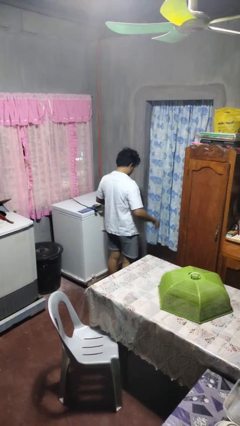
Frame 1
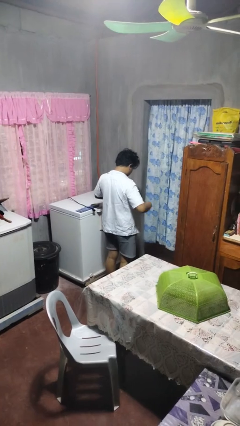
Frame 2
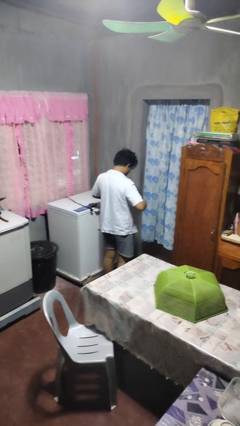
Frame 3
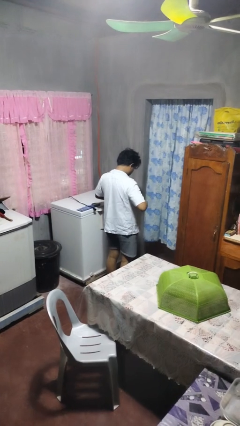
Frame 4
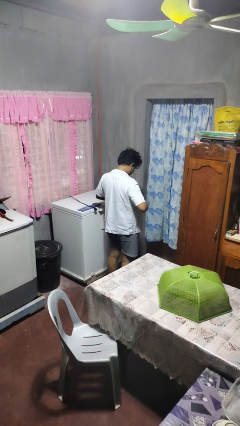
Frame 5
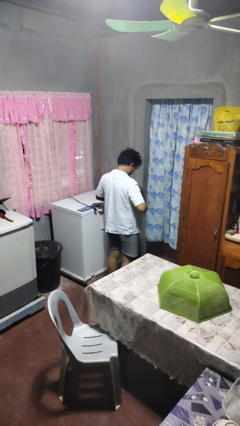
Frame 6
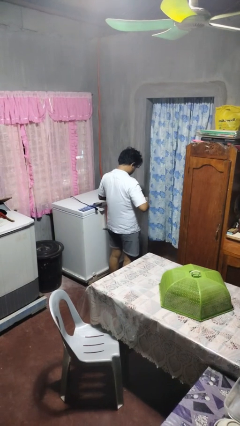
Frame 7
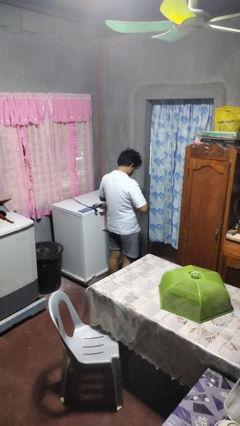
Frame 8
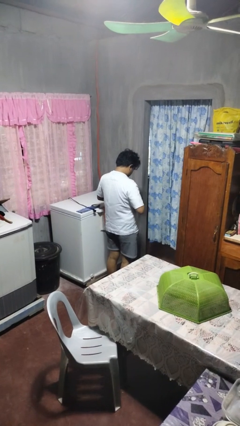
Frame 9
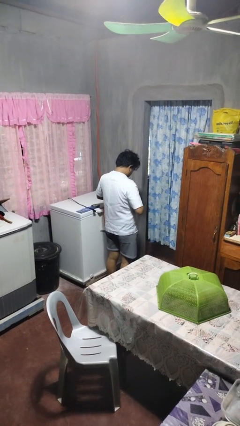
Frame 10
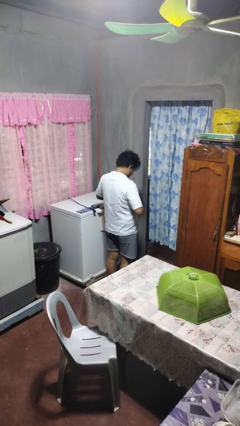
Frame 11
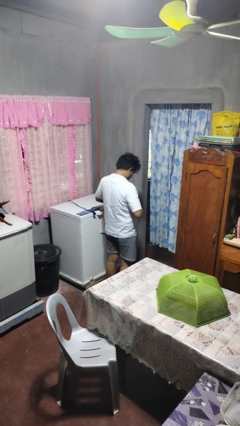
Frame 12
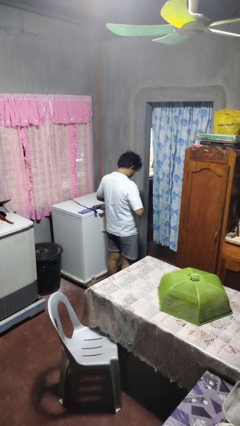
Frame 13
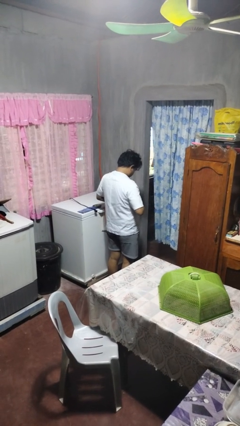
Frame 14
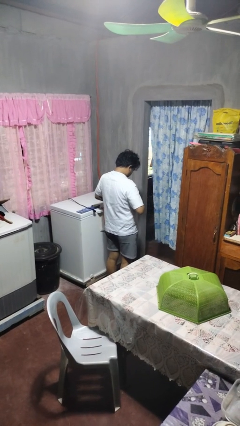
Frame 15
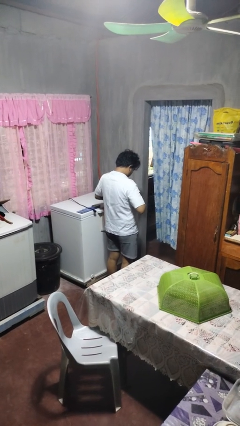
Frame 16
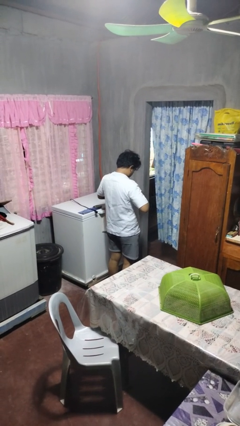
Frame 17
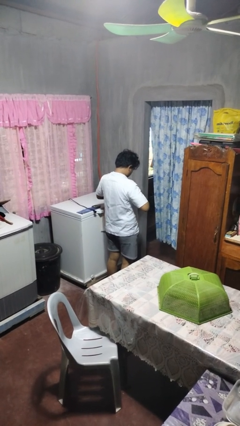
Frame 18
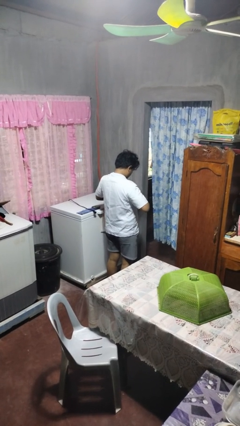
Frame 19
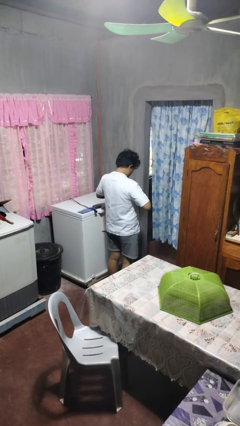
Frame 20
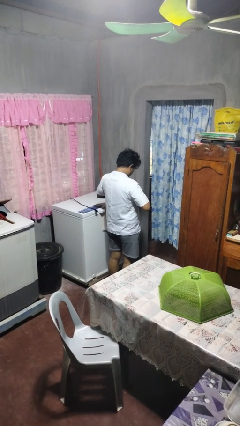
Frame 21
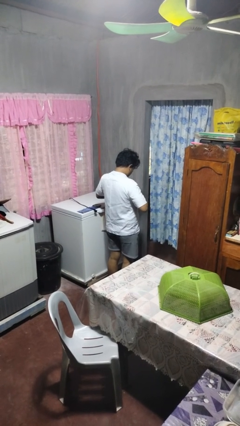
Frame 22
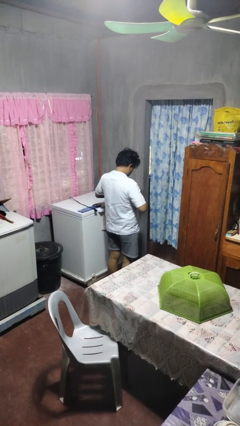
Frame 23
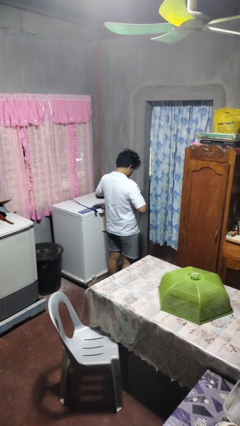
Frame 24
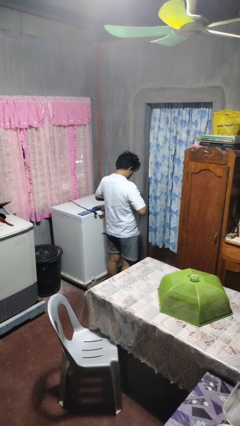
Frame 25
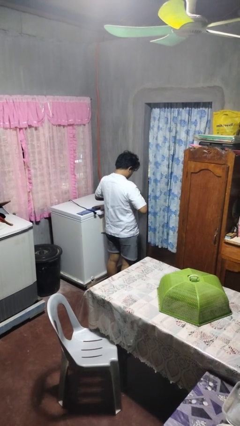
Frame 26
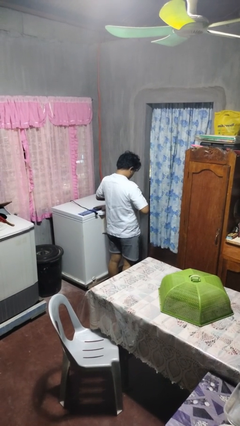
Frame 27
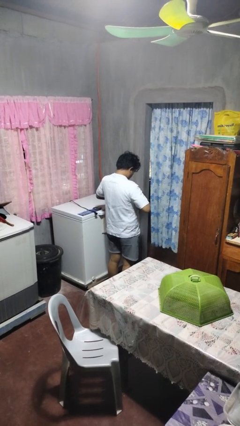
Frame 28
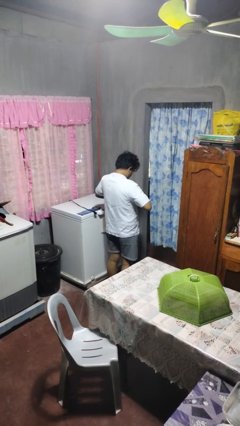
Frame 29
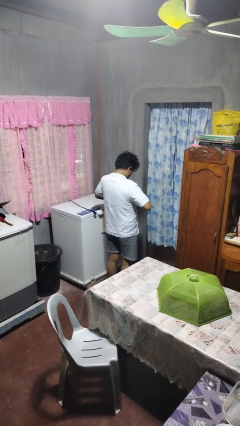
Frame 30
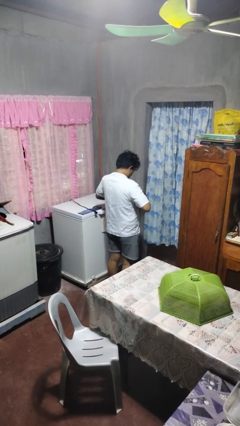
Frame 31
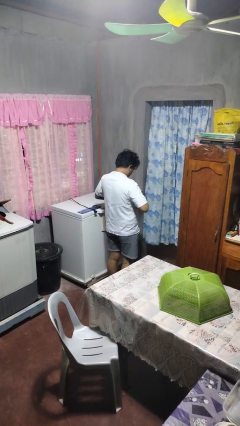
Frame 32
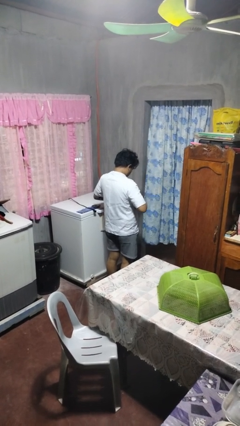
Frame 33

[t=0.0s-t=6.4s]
person buttons shirt

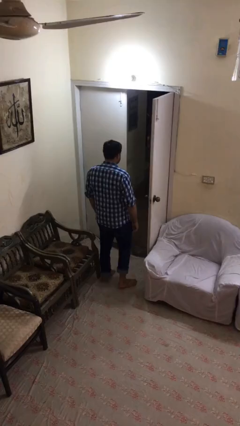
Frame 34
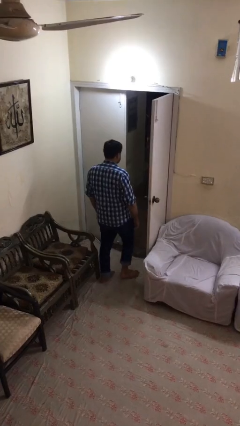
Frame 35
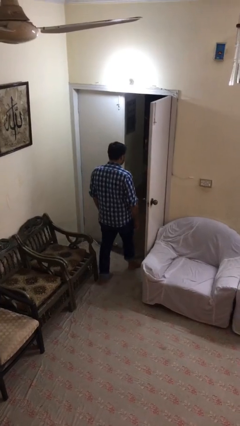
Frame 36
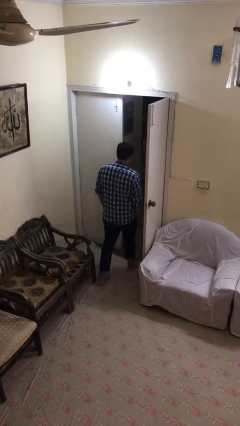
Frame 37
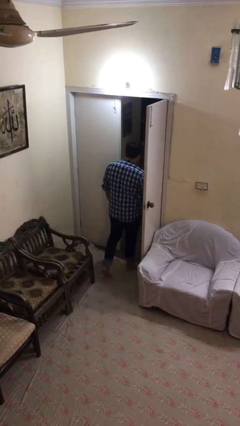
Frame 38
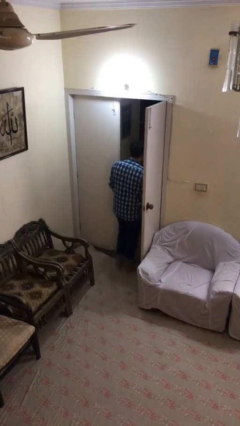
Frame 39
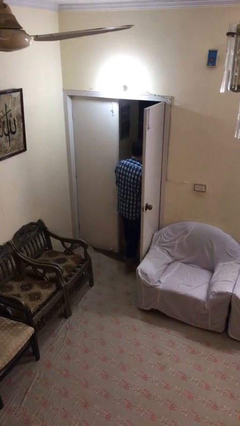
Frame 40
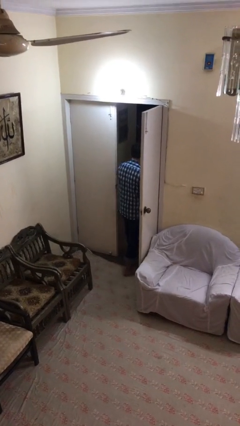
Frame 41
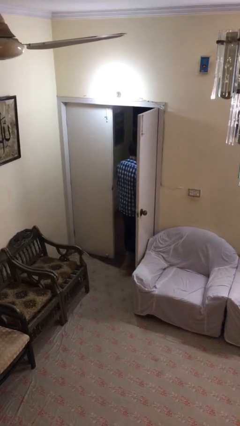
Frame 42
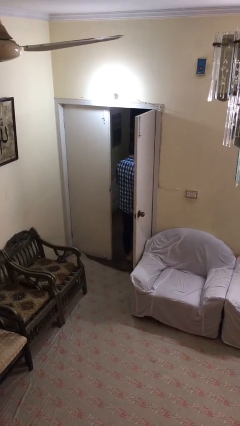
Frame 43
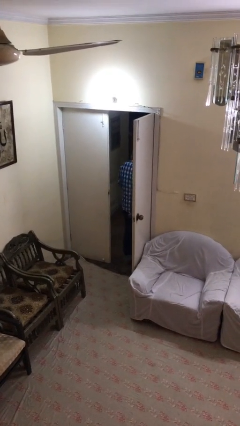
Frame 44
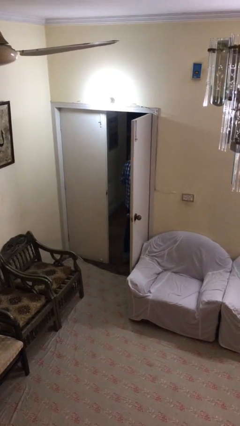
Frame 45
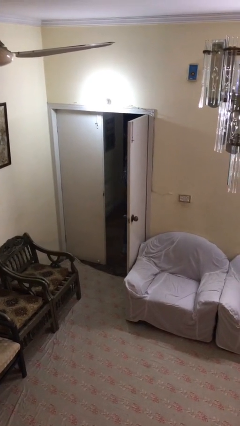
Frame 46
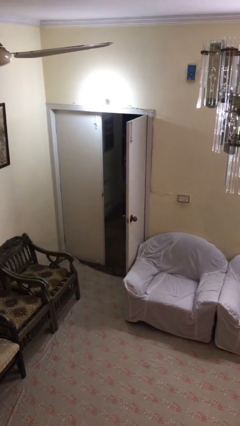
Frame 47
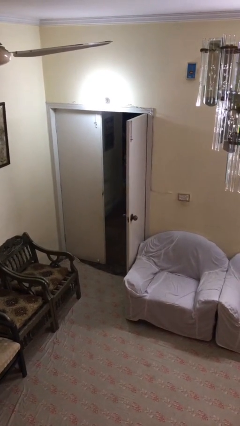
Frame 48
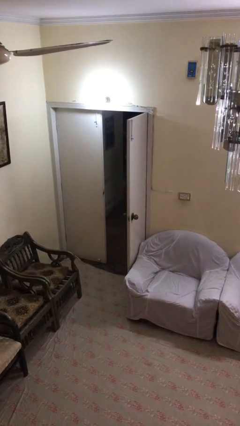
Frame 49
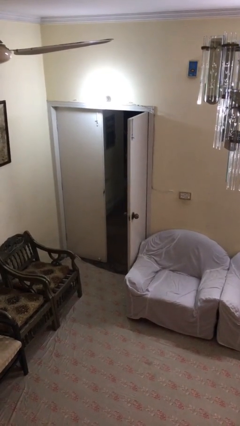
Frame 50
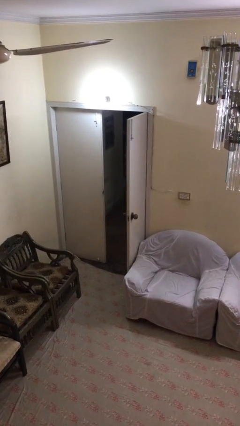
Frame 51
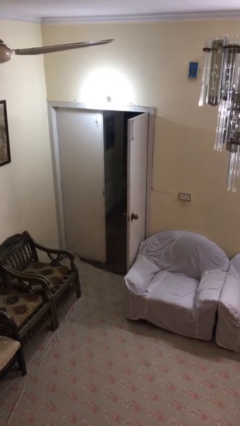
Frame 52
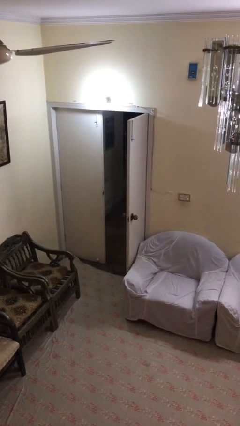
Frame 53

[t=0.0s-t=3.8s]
person exits scene through structure

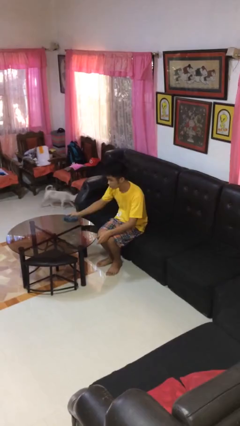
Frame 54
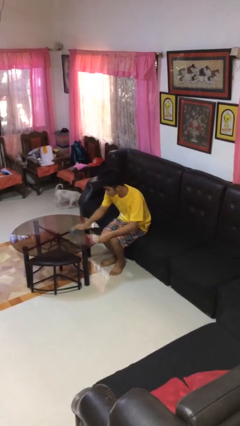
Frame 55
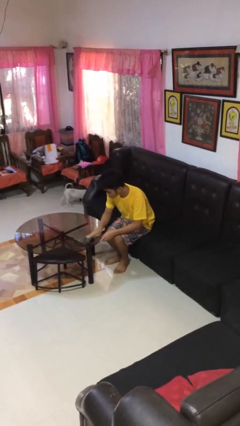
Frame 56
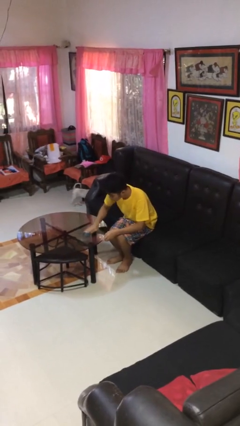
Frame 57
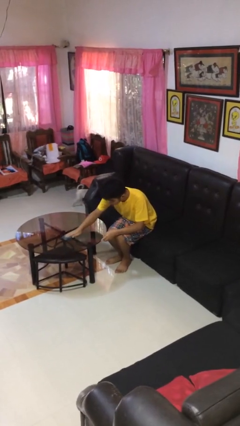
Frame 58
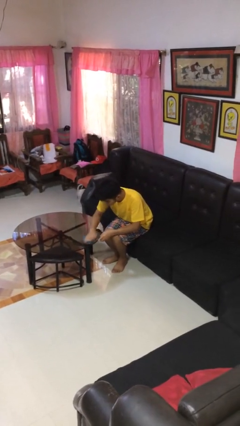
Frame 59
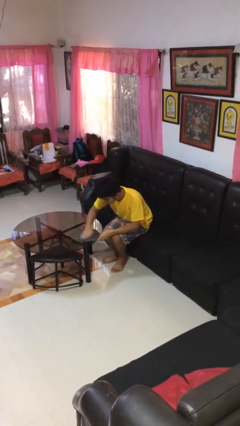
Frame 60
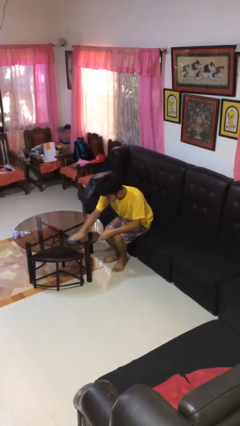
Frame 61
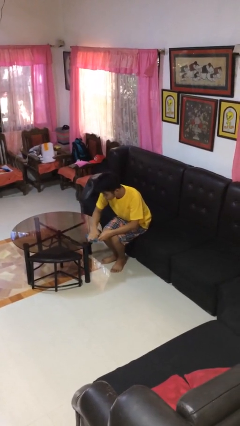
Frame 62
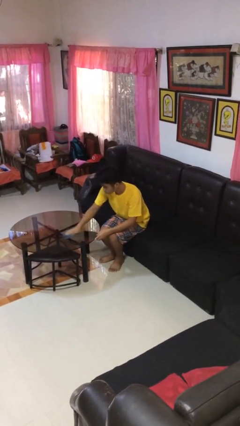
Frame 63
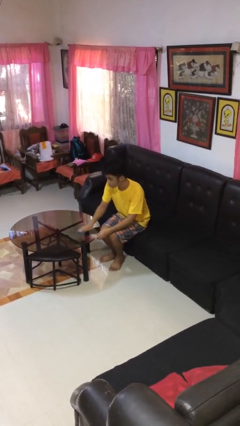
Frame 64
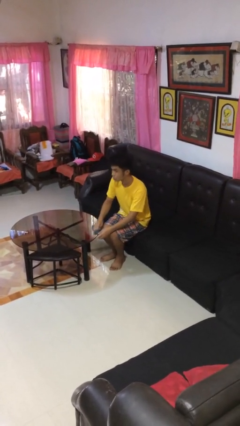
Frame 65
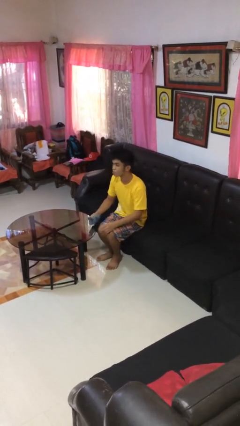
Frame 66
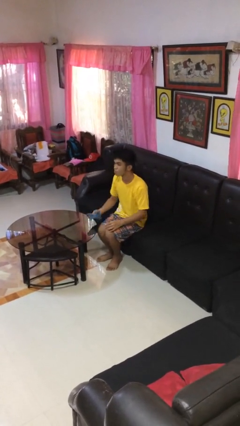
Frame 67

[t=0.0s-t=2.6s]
person cleans table with rag

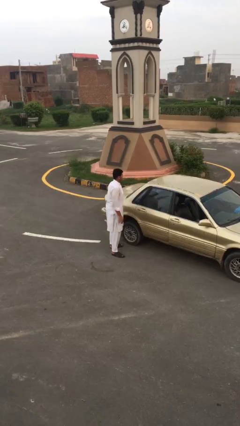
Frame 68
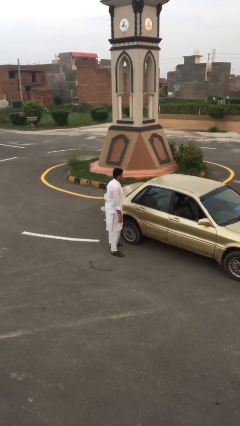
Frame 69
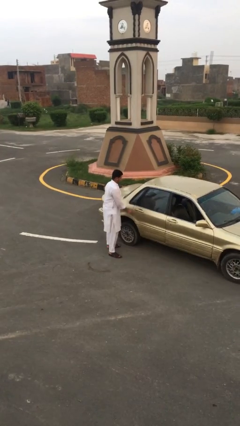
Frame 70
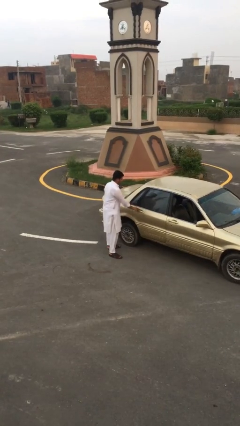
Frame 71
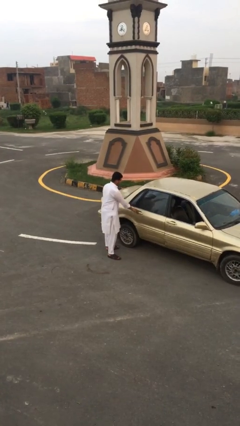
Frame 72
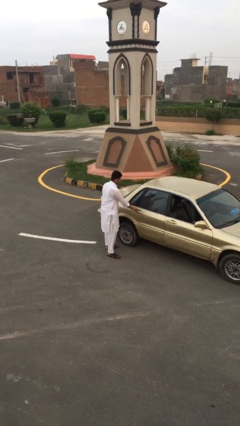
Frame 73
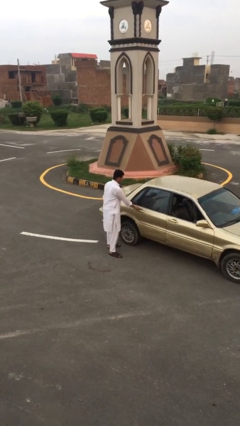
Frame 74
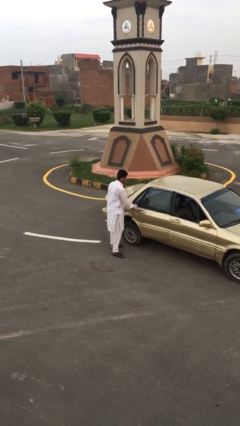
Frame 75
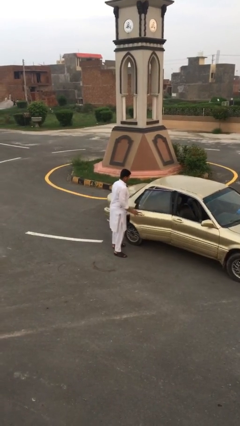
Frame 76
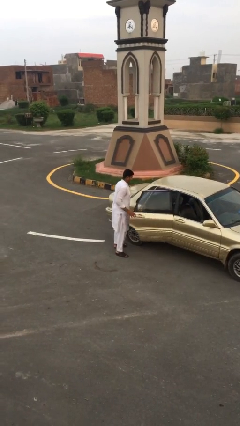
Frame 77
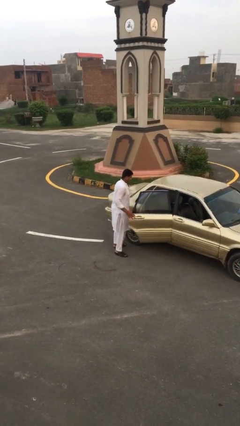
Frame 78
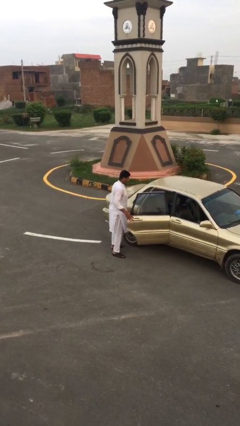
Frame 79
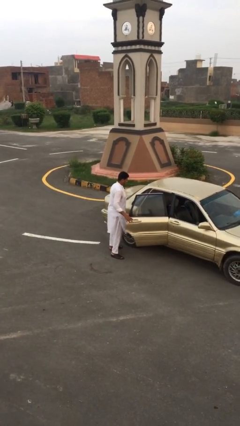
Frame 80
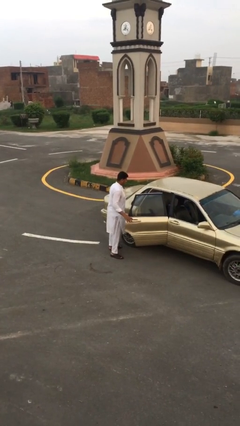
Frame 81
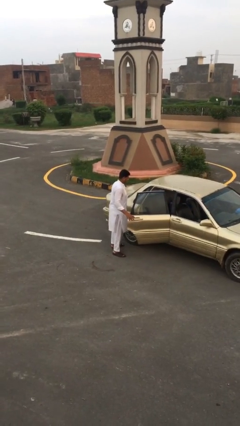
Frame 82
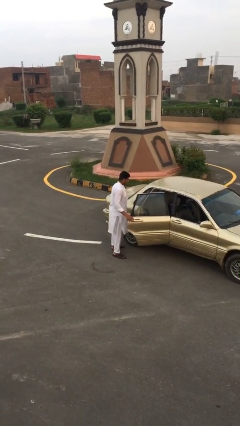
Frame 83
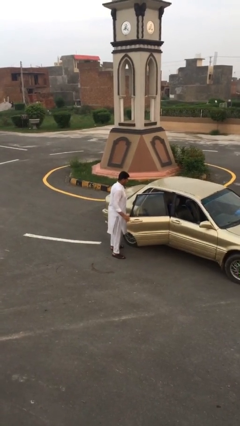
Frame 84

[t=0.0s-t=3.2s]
person opens car door

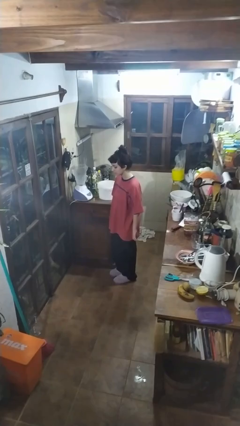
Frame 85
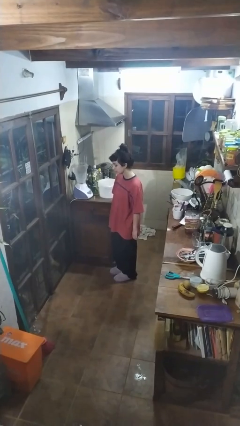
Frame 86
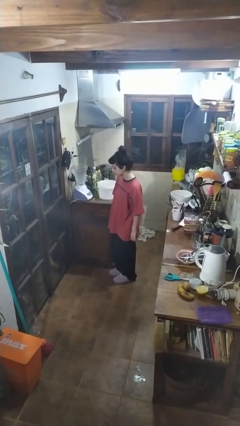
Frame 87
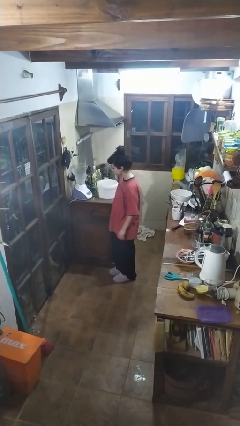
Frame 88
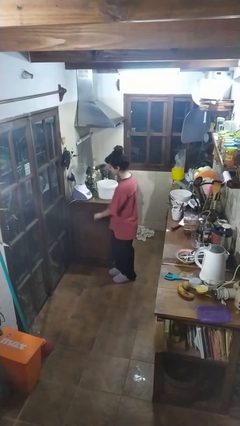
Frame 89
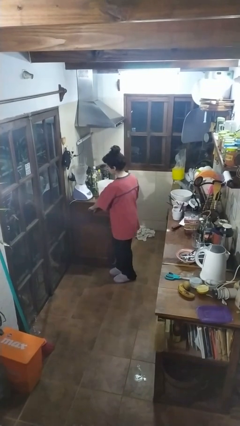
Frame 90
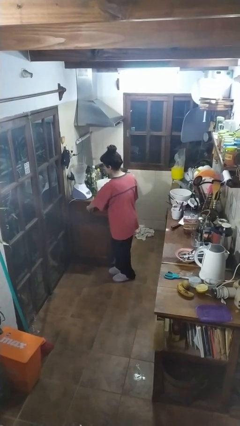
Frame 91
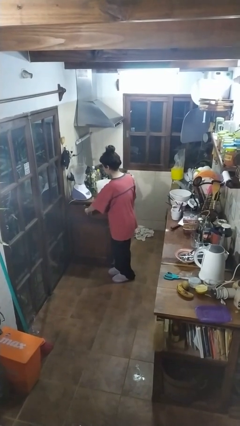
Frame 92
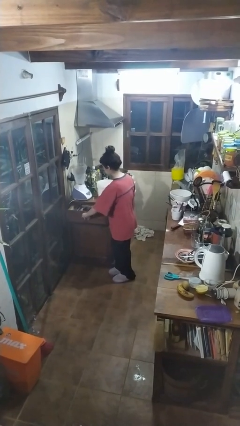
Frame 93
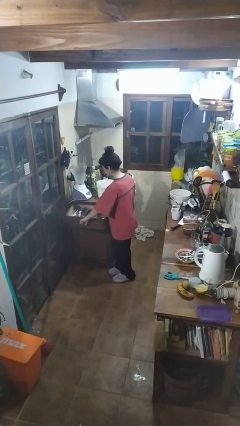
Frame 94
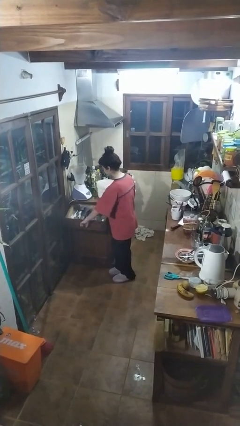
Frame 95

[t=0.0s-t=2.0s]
person opens kitchen drawer
